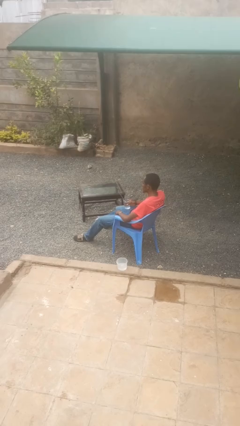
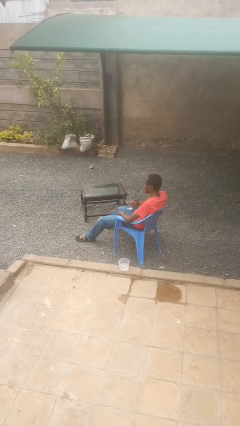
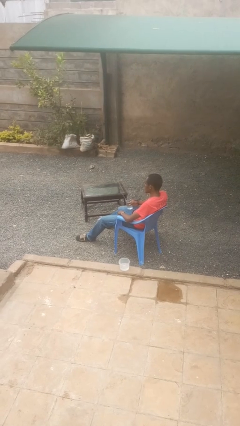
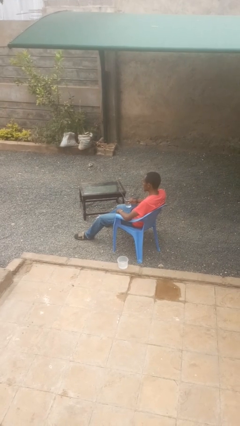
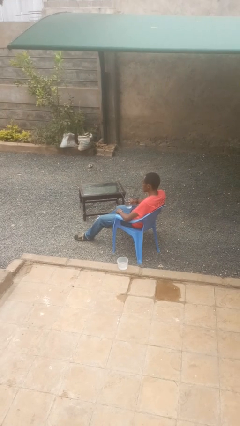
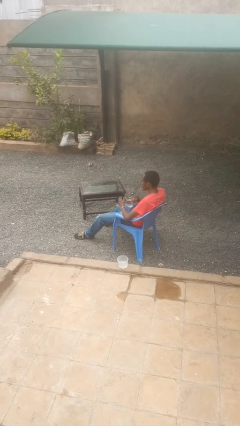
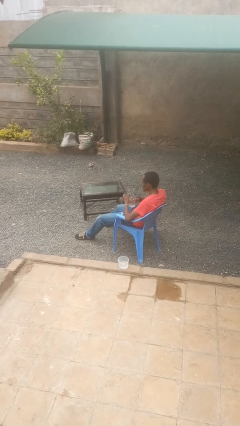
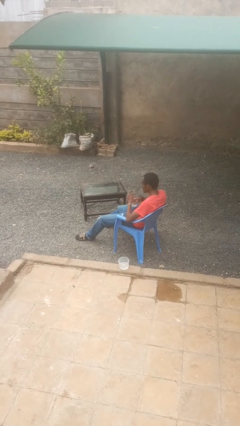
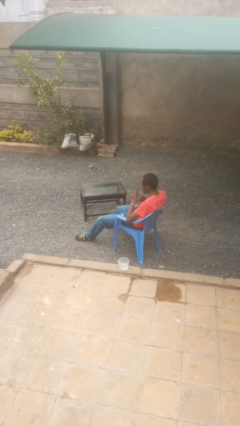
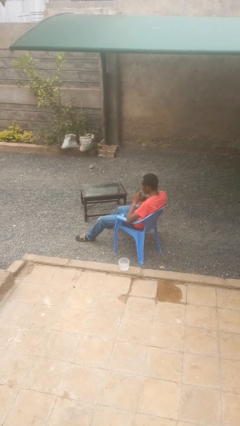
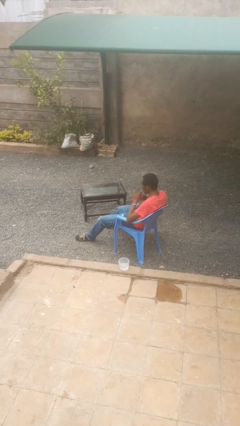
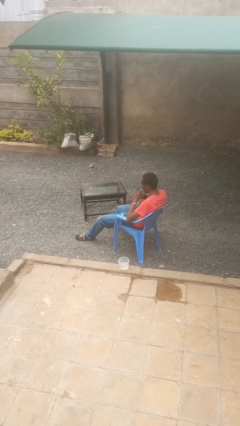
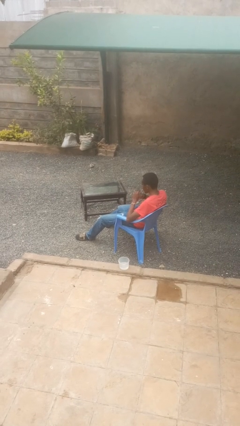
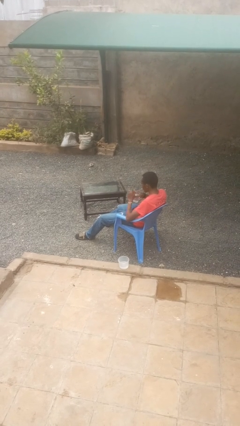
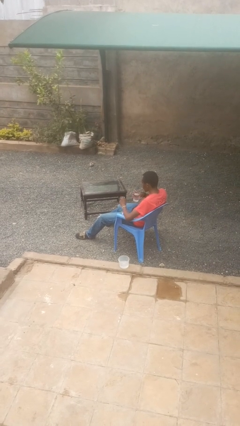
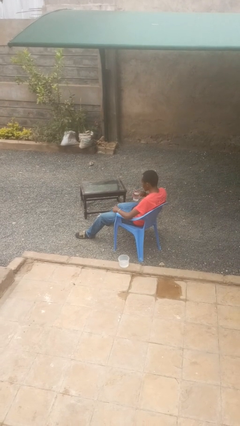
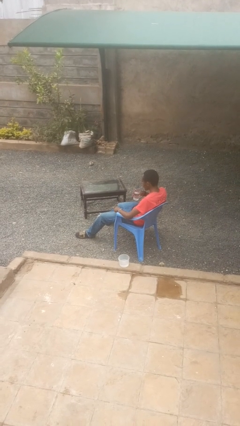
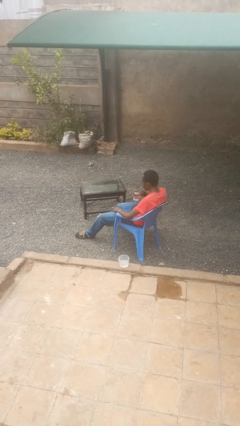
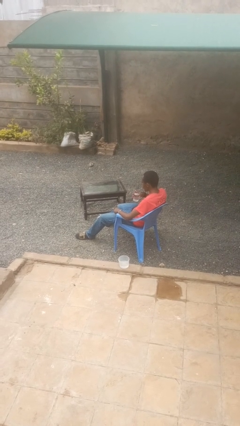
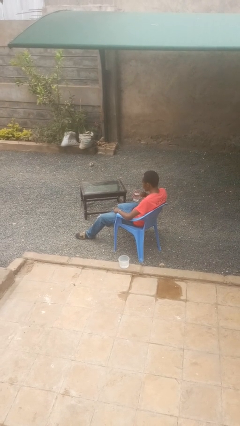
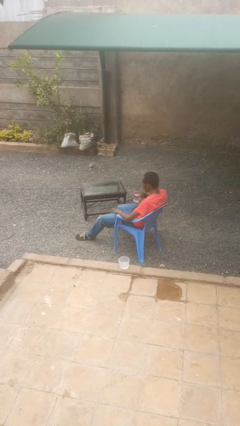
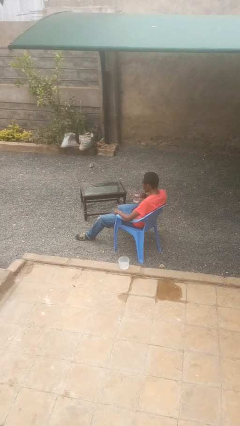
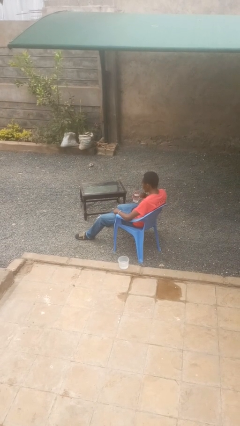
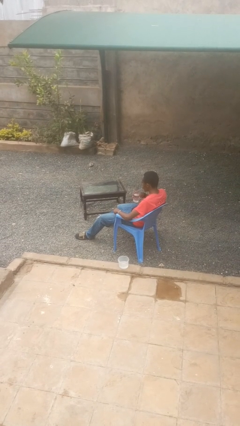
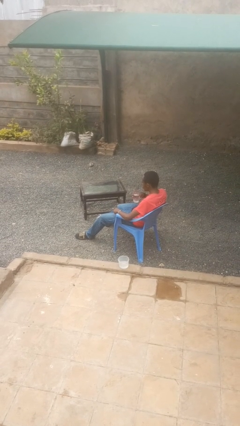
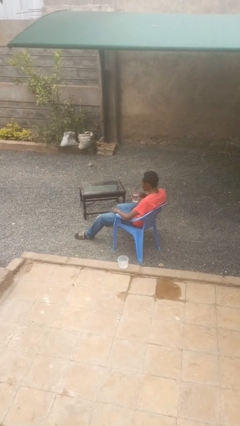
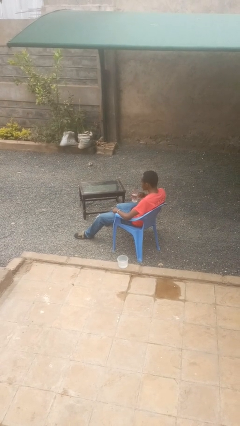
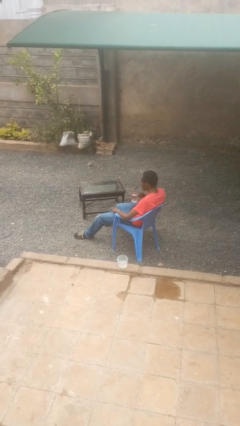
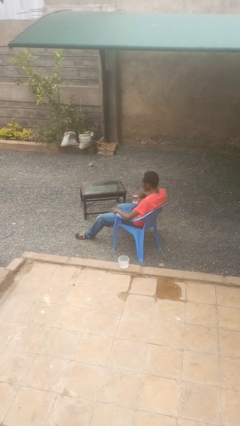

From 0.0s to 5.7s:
person drinks from straw

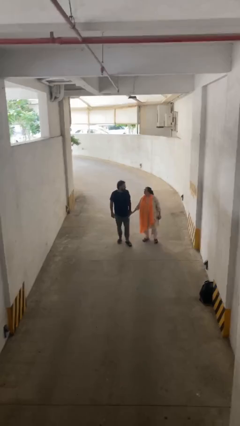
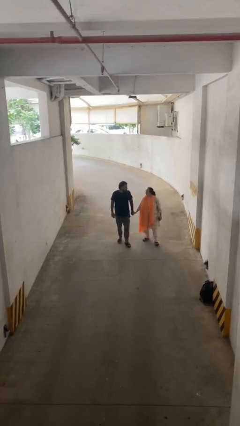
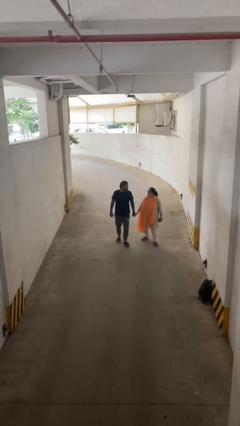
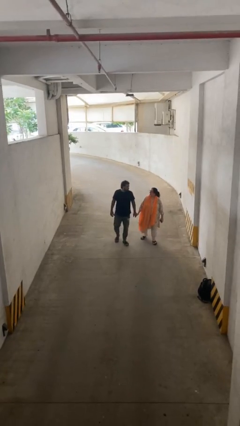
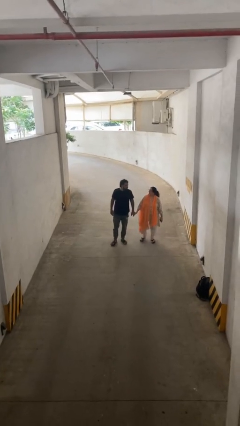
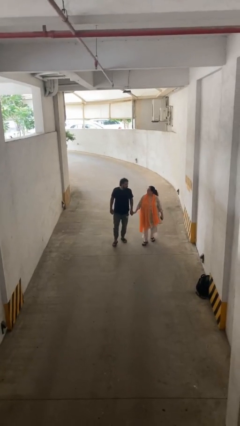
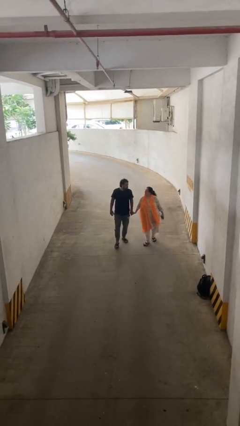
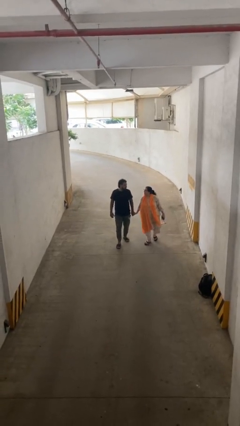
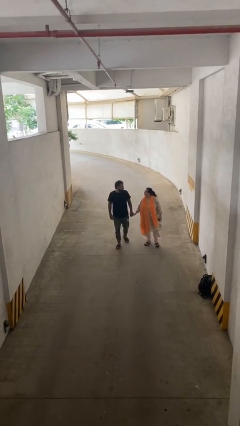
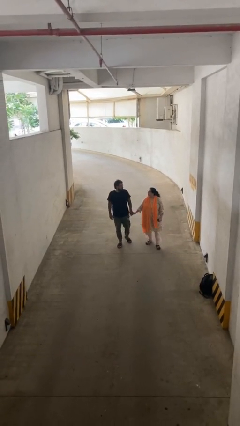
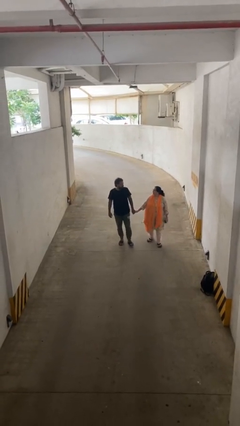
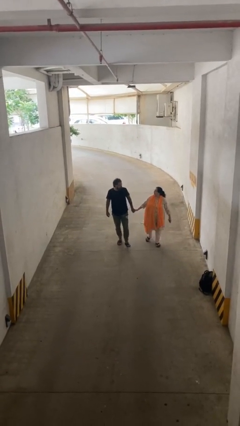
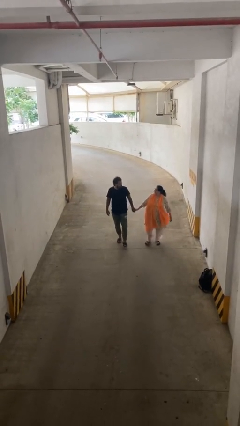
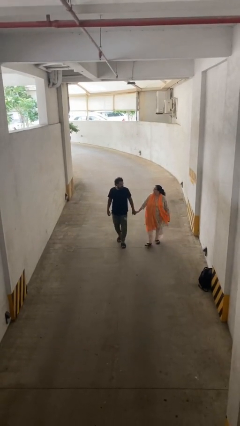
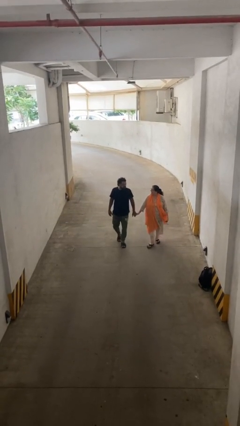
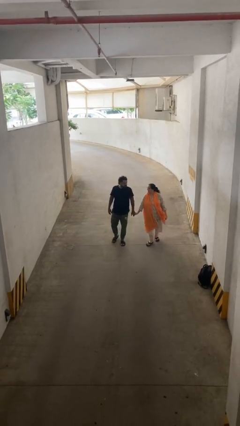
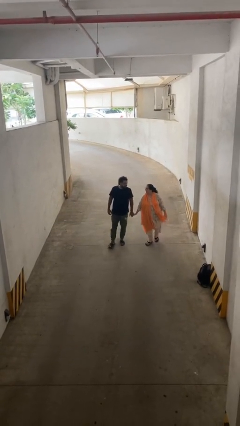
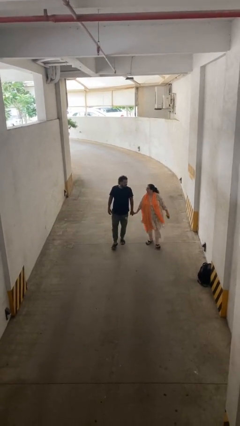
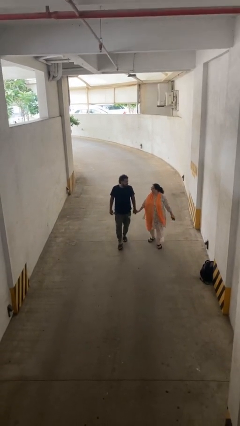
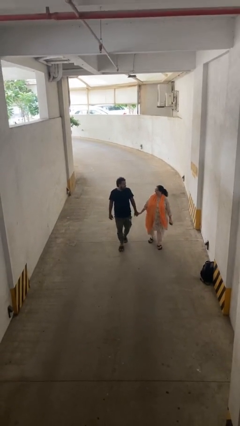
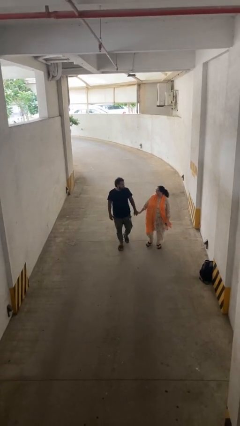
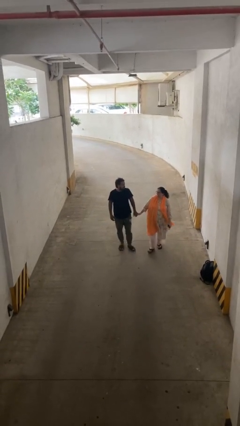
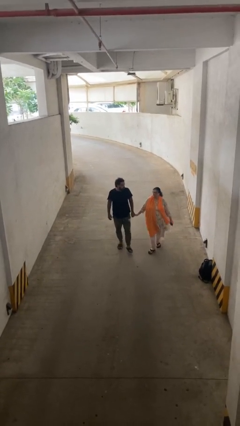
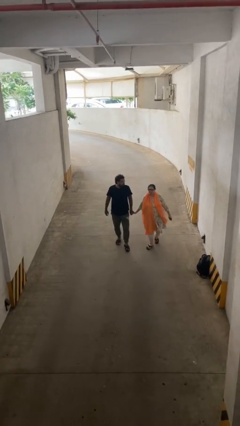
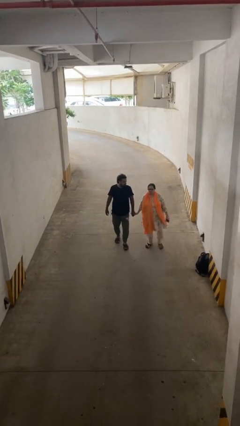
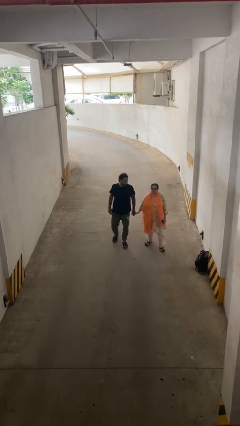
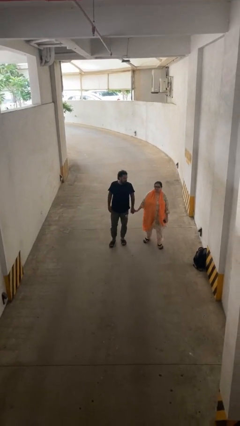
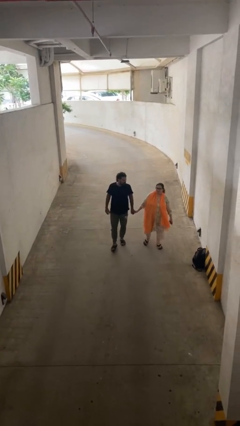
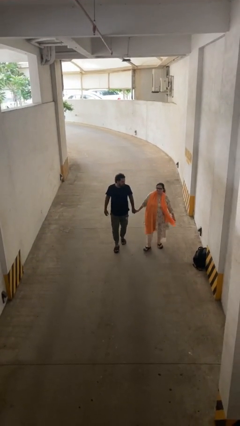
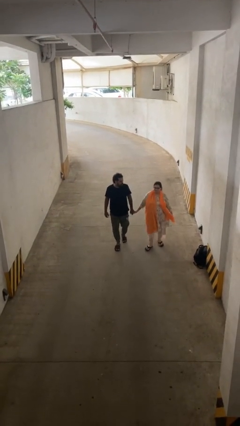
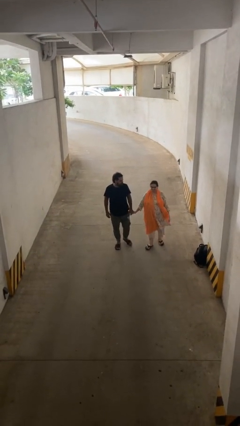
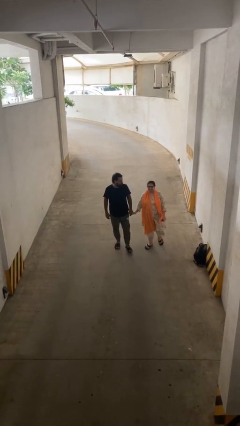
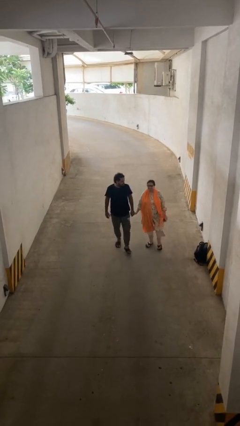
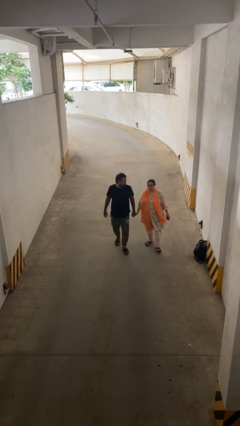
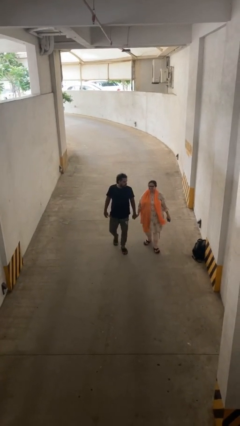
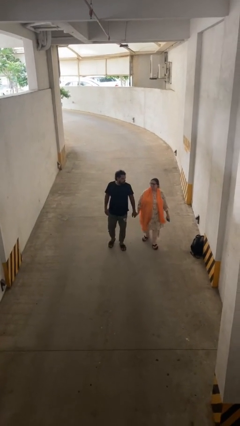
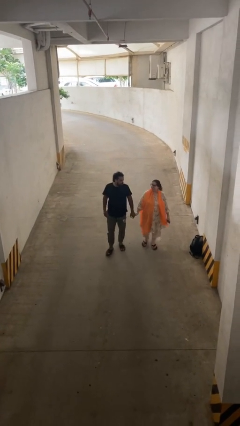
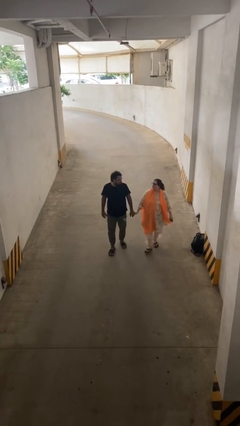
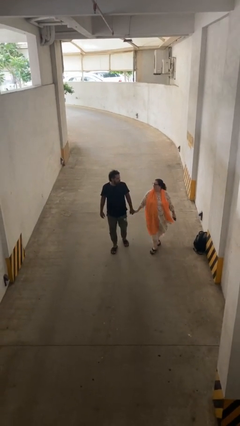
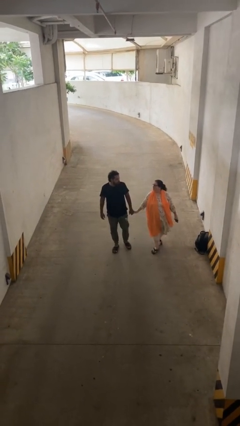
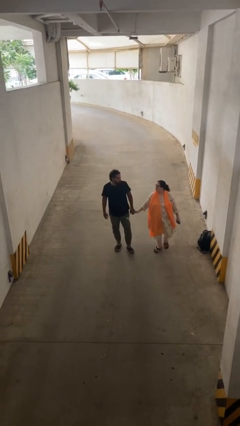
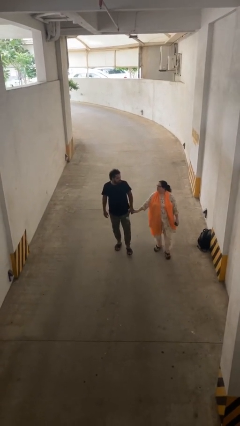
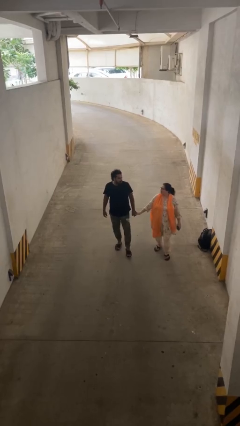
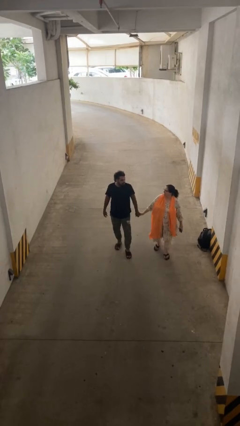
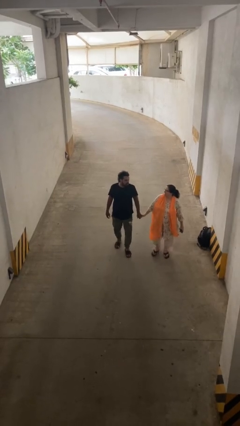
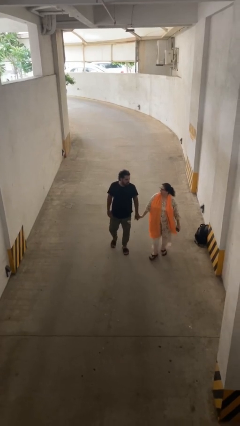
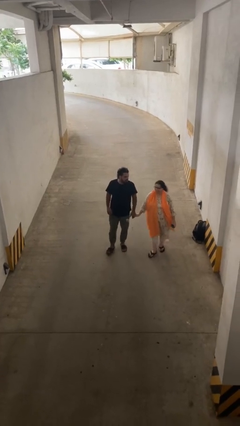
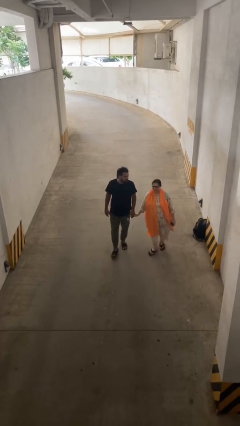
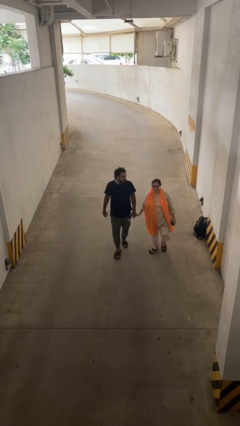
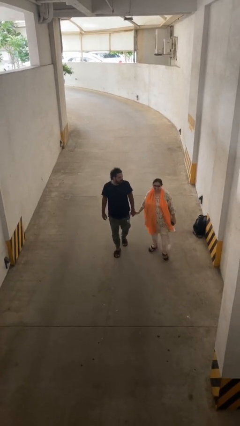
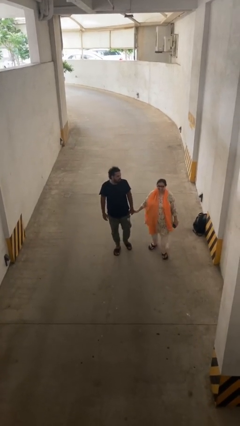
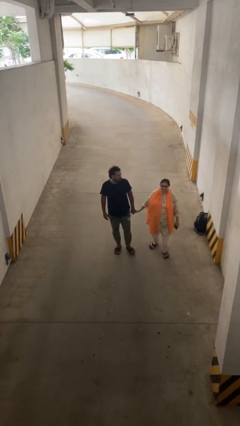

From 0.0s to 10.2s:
person holds hand

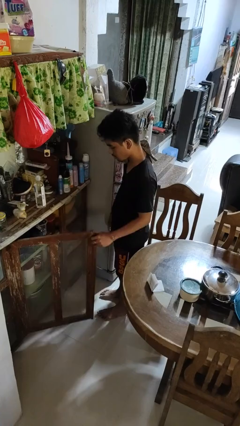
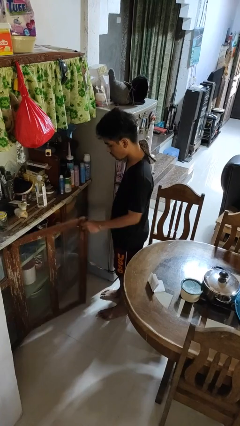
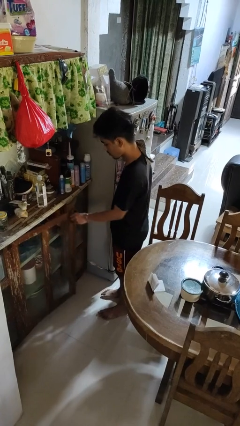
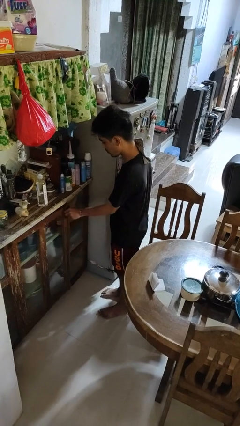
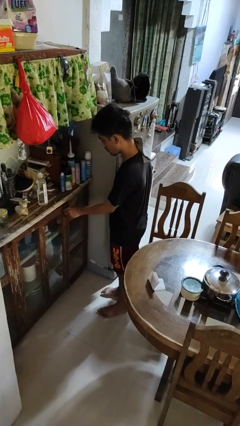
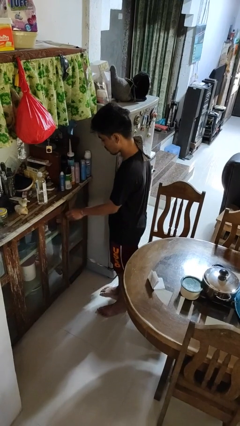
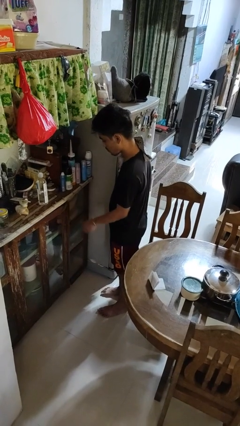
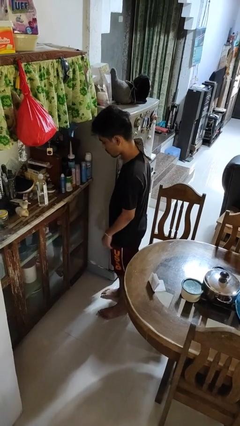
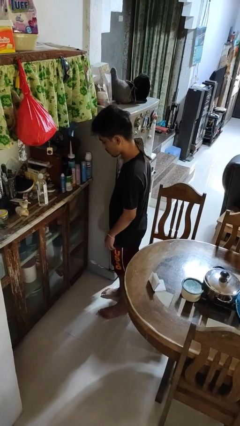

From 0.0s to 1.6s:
person closes cabinet
